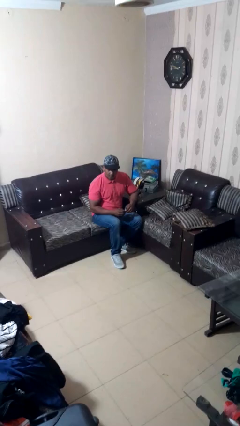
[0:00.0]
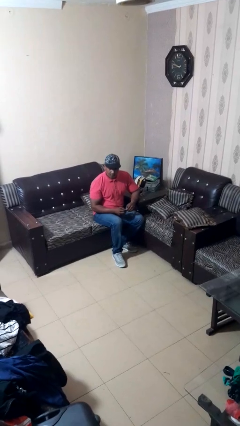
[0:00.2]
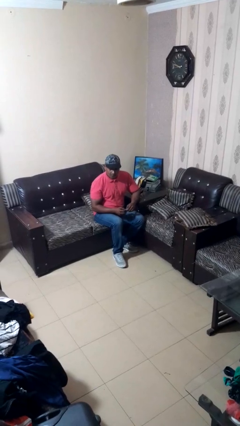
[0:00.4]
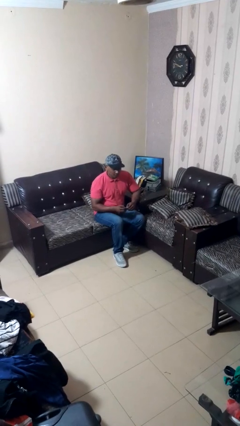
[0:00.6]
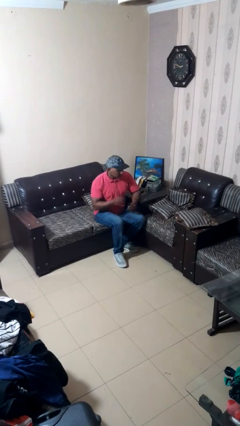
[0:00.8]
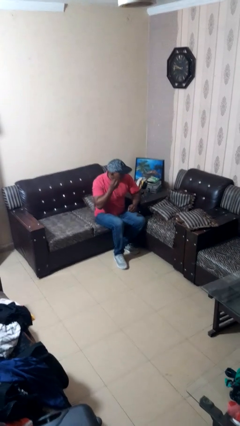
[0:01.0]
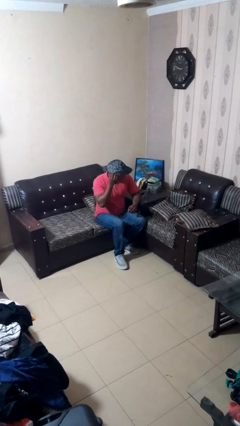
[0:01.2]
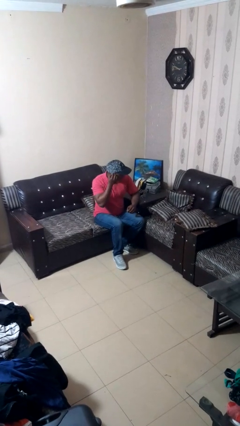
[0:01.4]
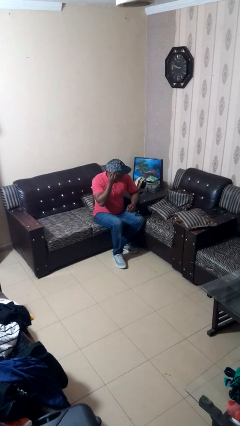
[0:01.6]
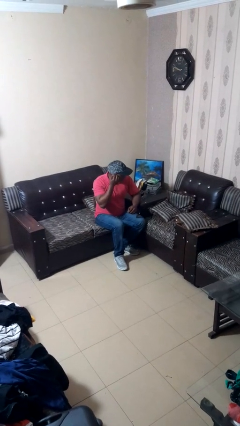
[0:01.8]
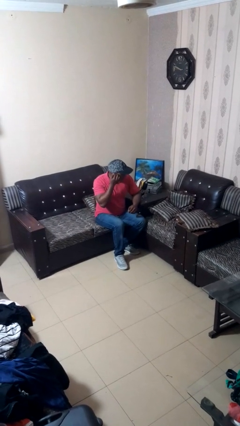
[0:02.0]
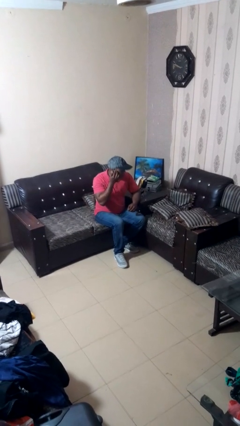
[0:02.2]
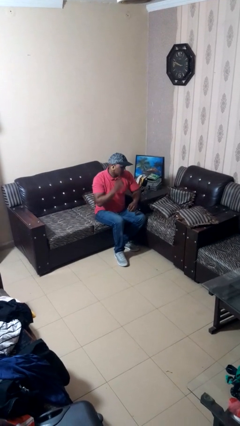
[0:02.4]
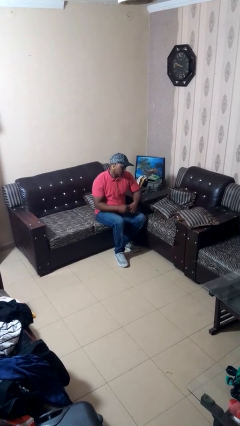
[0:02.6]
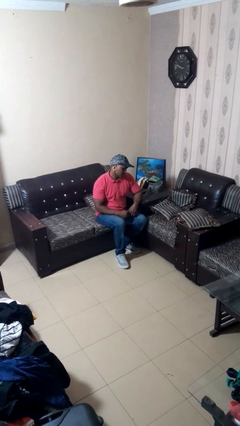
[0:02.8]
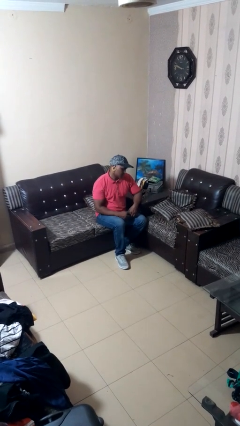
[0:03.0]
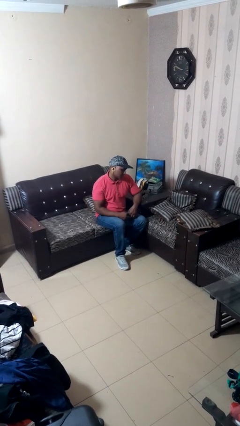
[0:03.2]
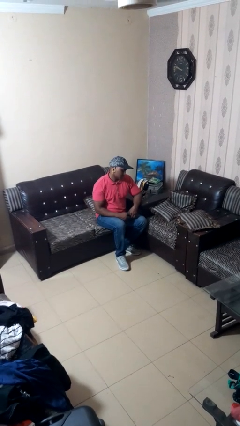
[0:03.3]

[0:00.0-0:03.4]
person puts on earrings

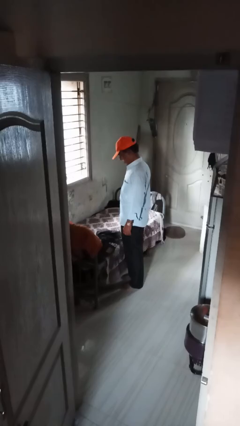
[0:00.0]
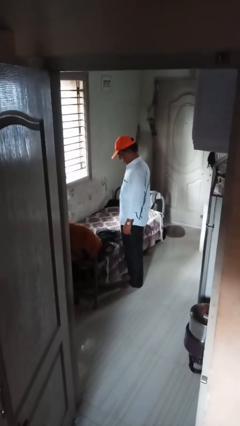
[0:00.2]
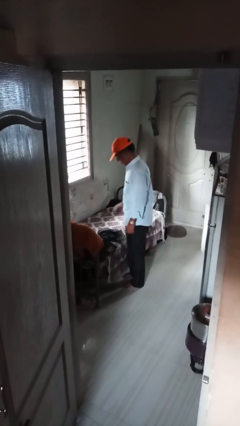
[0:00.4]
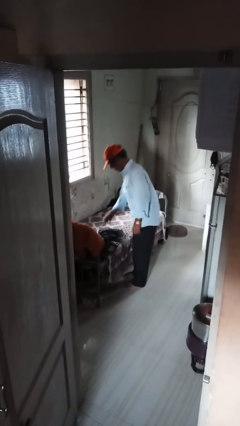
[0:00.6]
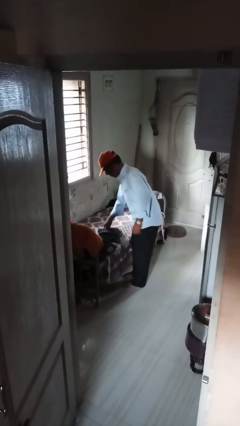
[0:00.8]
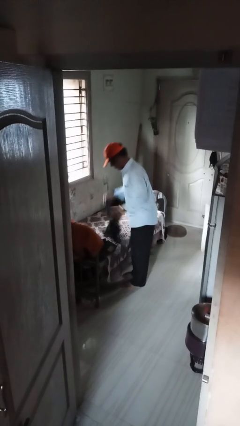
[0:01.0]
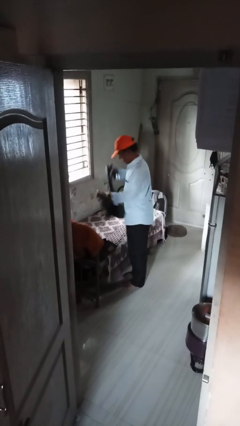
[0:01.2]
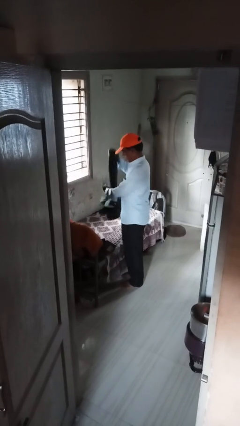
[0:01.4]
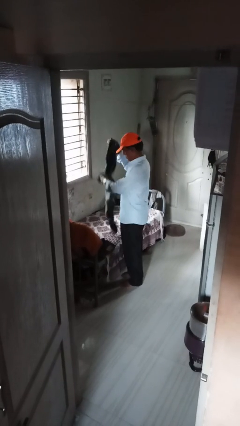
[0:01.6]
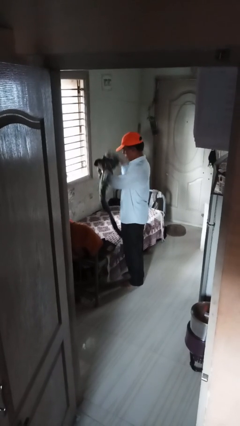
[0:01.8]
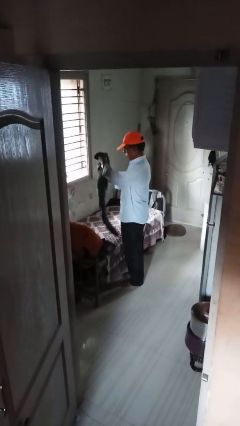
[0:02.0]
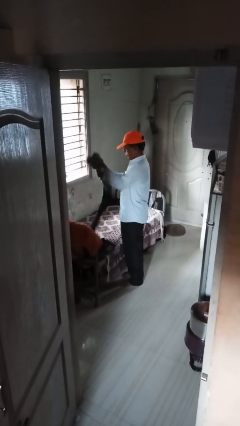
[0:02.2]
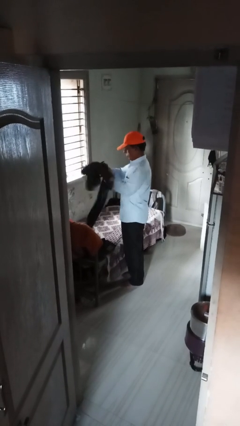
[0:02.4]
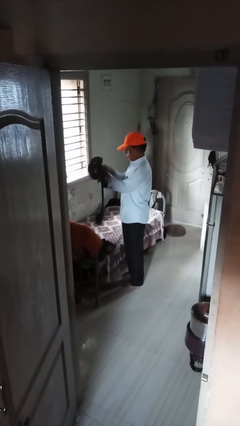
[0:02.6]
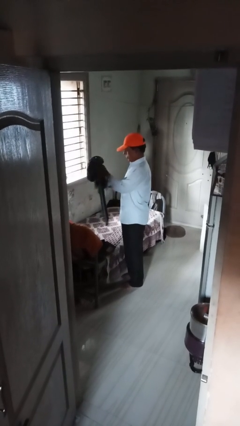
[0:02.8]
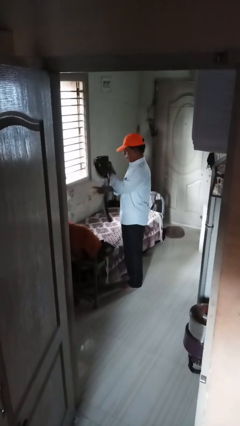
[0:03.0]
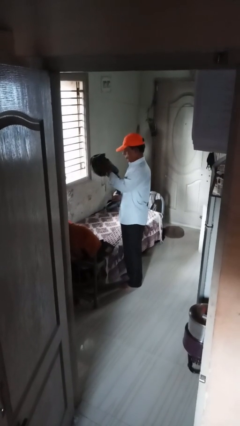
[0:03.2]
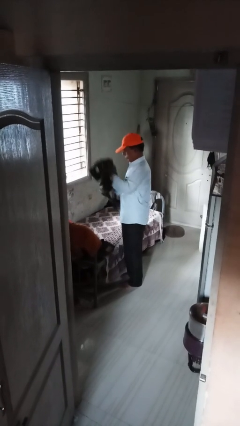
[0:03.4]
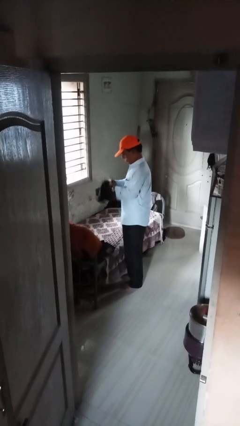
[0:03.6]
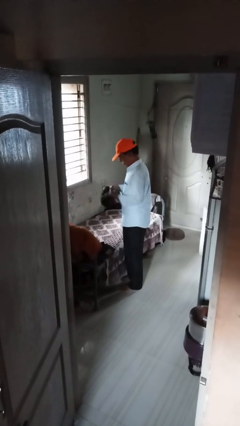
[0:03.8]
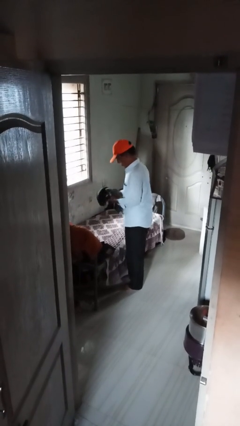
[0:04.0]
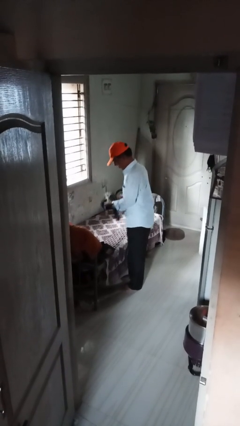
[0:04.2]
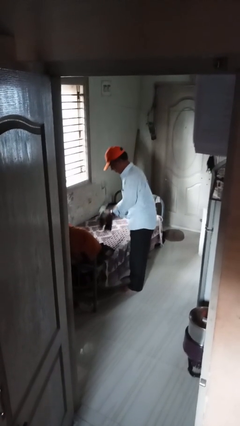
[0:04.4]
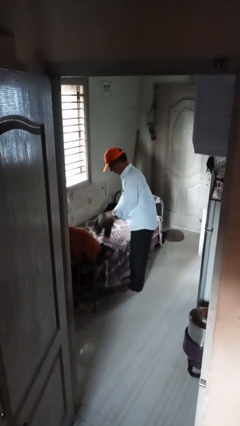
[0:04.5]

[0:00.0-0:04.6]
person folds shirt

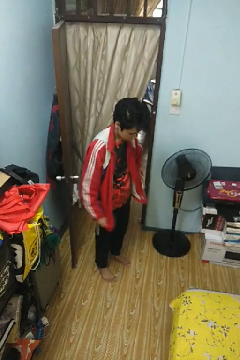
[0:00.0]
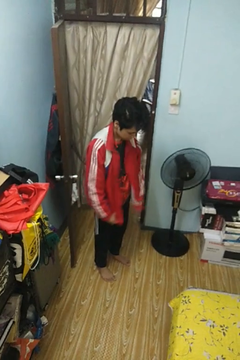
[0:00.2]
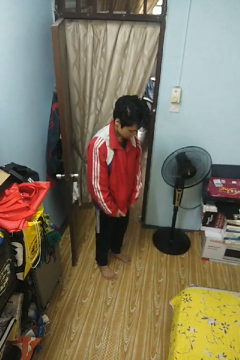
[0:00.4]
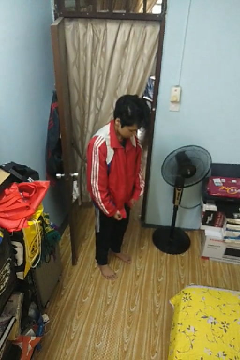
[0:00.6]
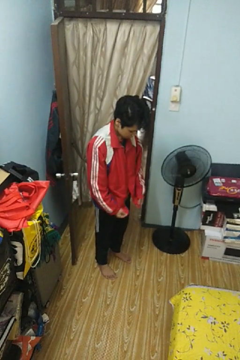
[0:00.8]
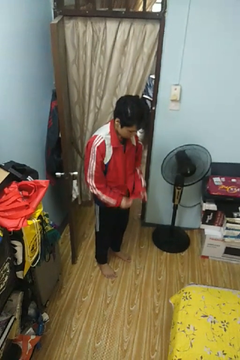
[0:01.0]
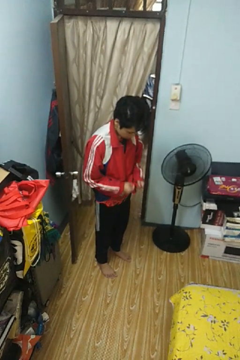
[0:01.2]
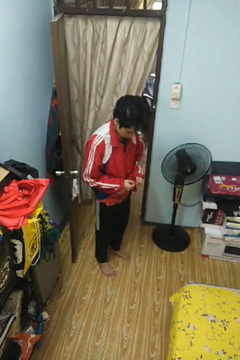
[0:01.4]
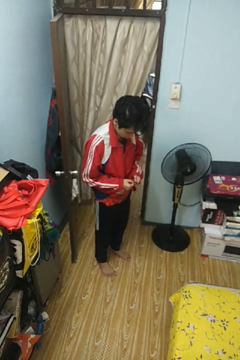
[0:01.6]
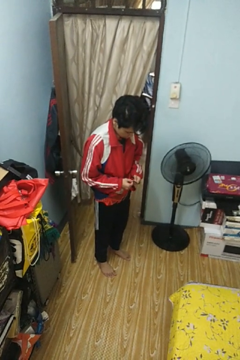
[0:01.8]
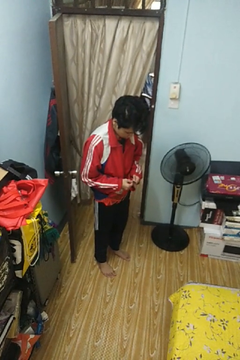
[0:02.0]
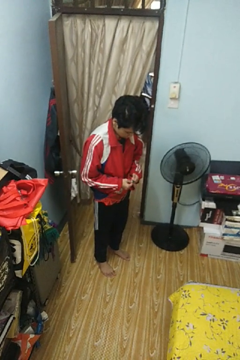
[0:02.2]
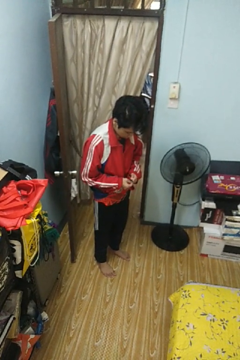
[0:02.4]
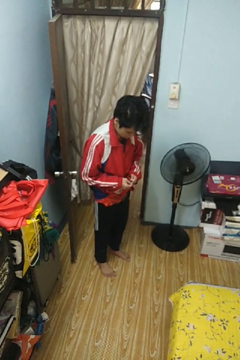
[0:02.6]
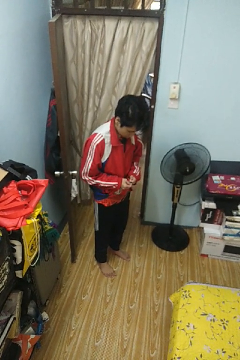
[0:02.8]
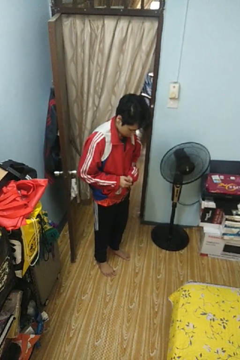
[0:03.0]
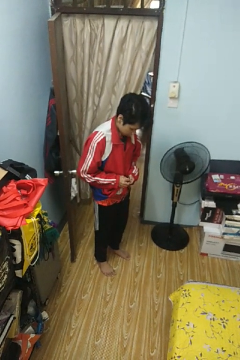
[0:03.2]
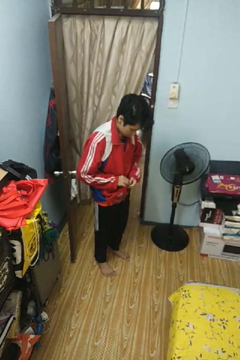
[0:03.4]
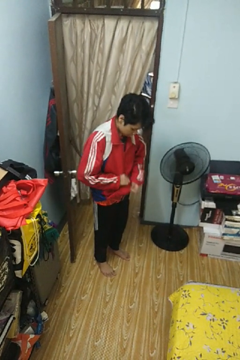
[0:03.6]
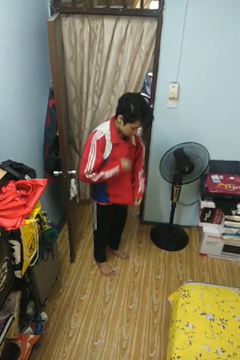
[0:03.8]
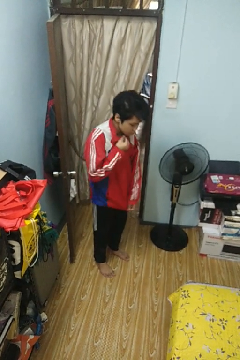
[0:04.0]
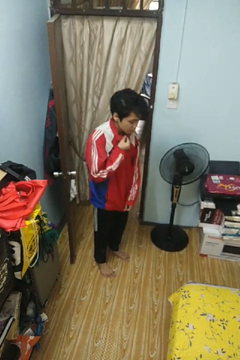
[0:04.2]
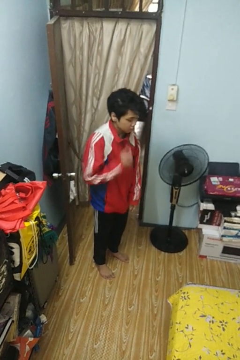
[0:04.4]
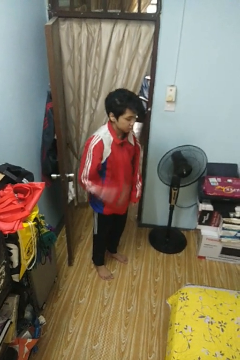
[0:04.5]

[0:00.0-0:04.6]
person zips up jacket

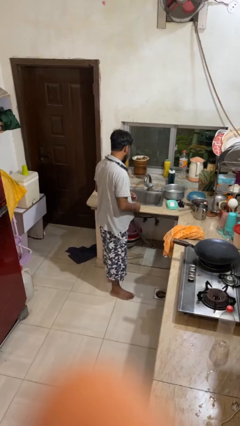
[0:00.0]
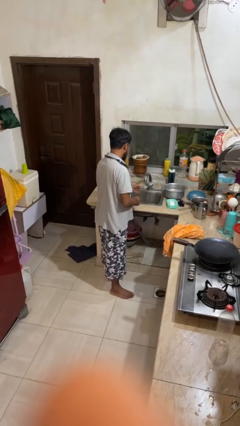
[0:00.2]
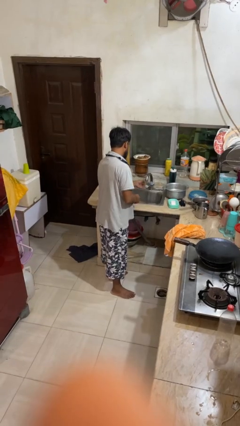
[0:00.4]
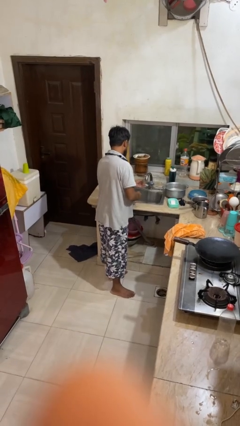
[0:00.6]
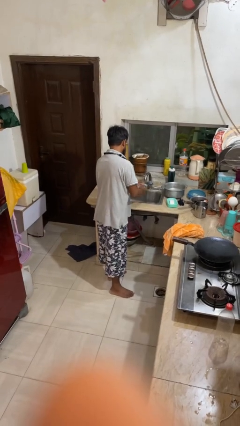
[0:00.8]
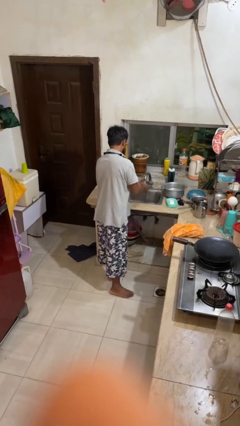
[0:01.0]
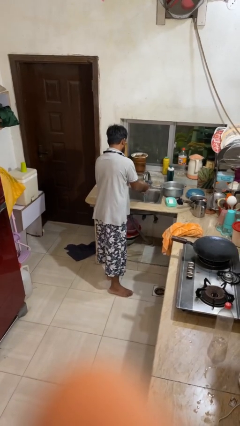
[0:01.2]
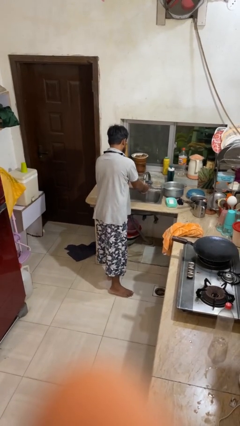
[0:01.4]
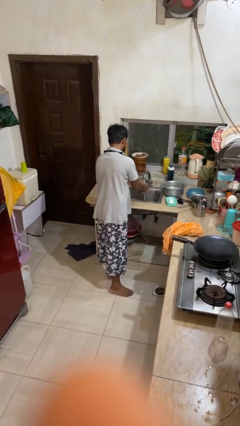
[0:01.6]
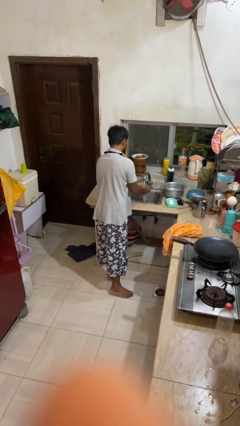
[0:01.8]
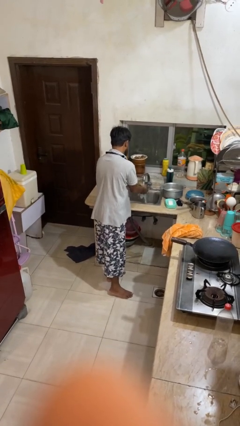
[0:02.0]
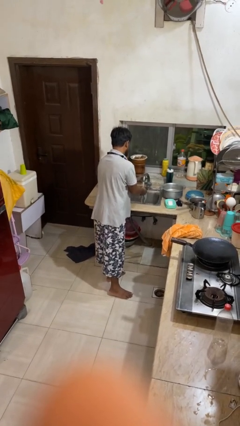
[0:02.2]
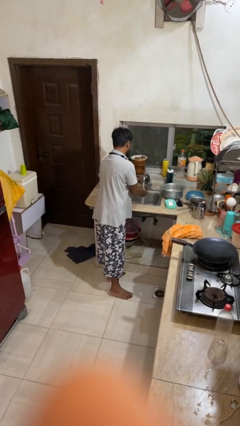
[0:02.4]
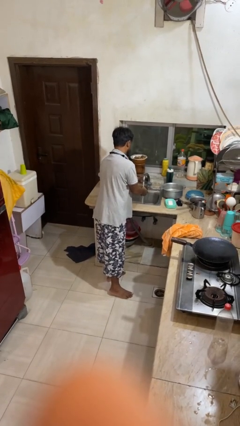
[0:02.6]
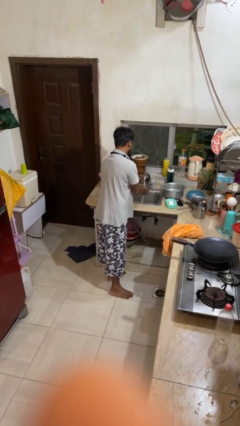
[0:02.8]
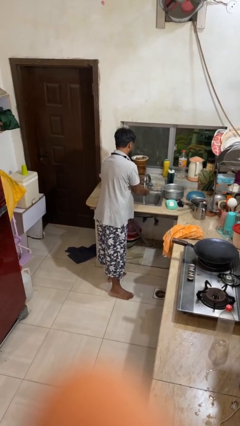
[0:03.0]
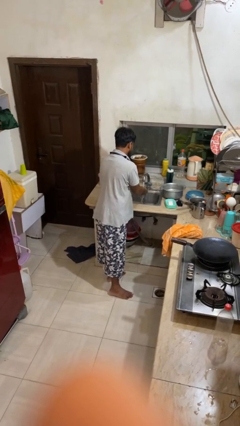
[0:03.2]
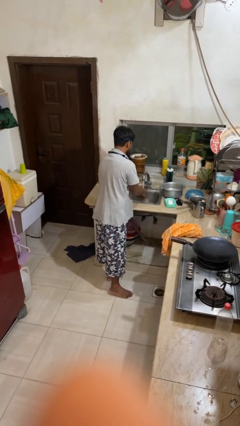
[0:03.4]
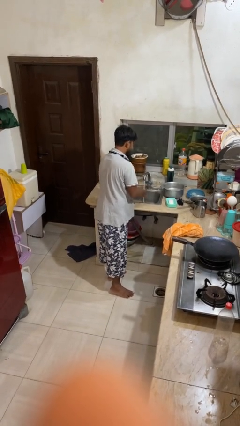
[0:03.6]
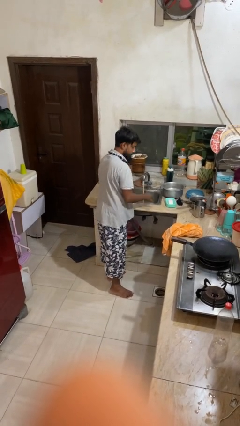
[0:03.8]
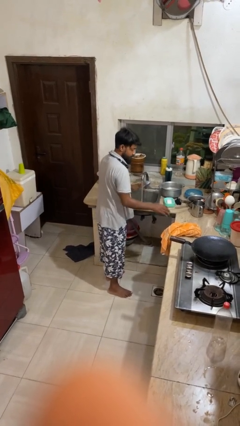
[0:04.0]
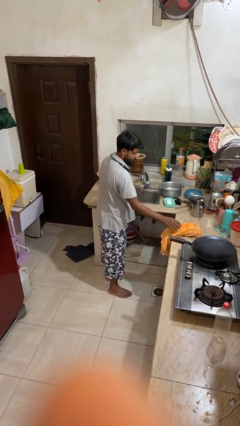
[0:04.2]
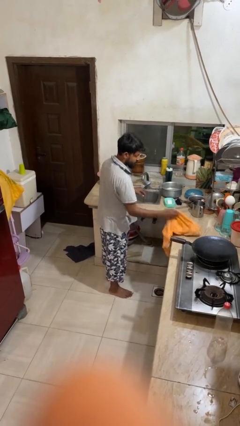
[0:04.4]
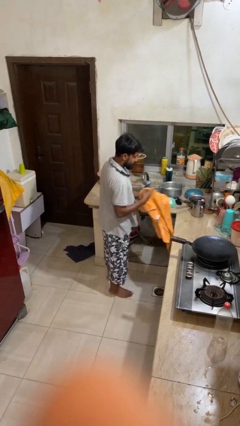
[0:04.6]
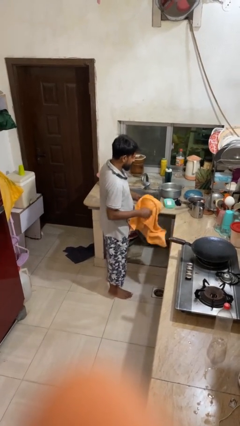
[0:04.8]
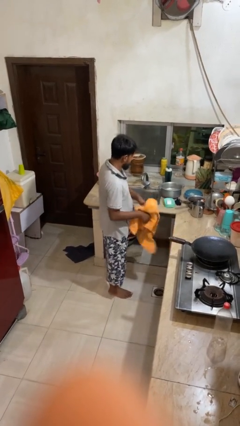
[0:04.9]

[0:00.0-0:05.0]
person washes hands

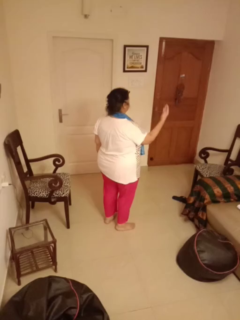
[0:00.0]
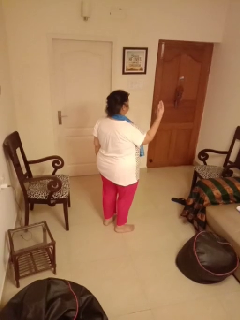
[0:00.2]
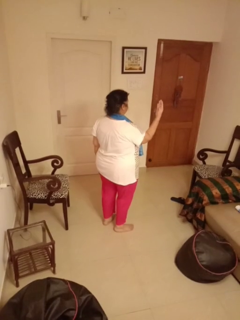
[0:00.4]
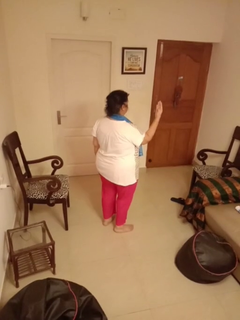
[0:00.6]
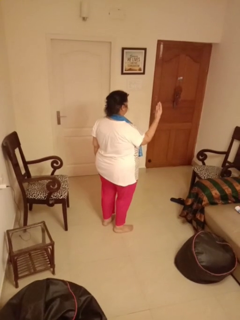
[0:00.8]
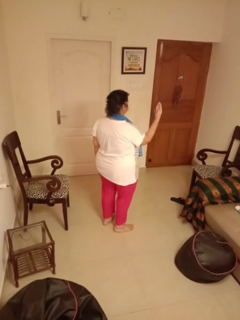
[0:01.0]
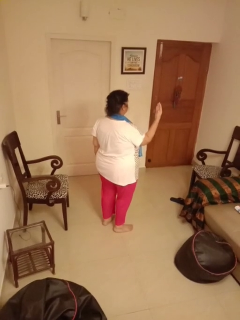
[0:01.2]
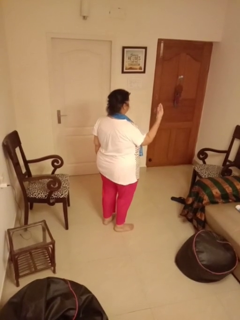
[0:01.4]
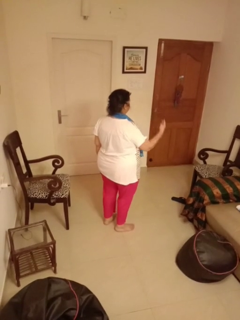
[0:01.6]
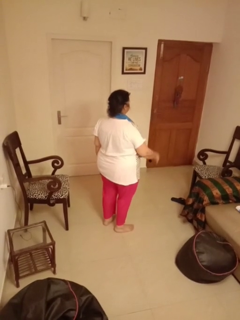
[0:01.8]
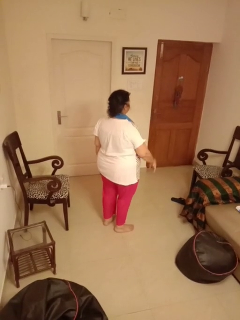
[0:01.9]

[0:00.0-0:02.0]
person gestures number four
